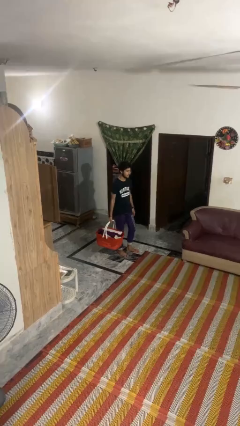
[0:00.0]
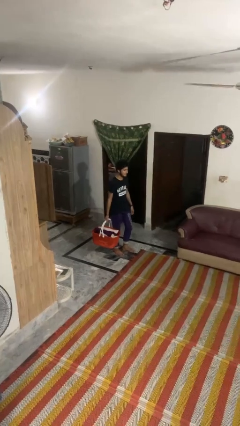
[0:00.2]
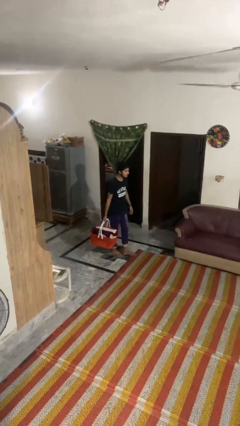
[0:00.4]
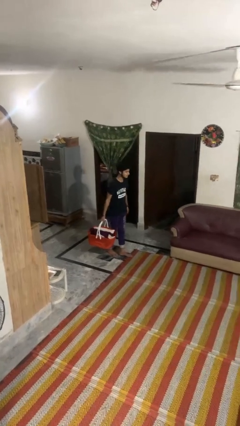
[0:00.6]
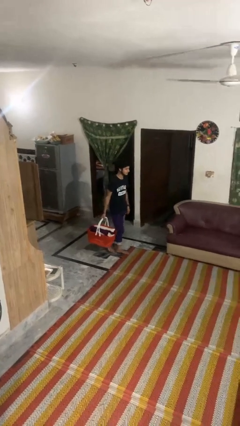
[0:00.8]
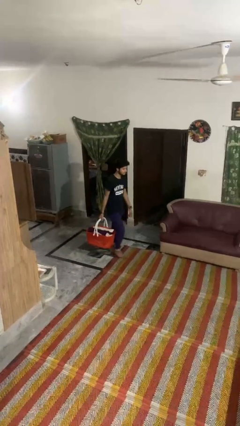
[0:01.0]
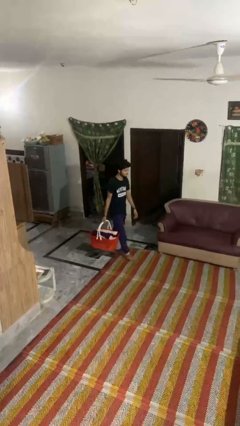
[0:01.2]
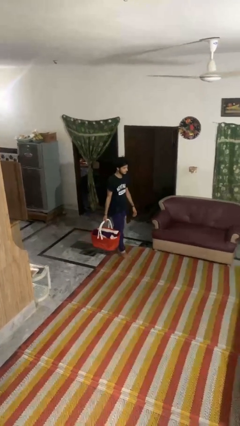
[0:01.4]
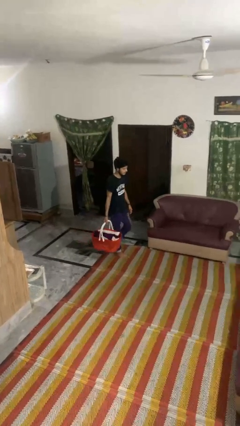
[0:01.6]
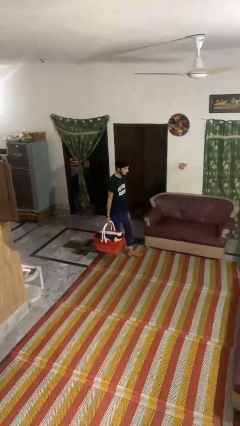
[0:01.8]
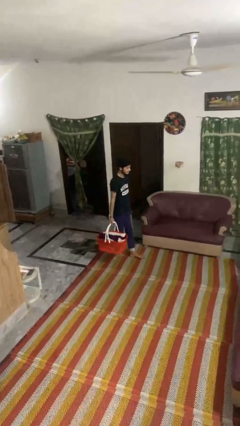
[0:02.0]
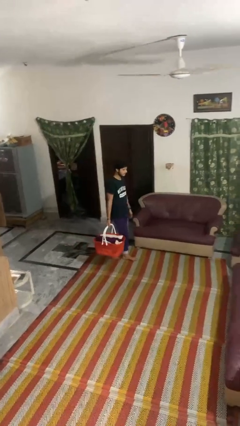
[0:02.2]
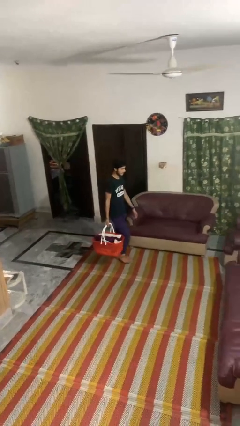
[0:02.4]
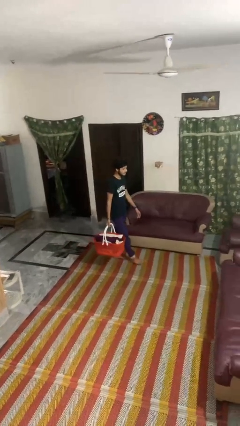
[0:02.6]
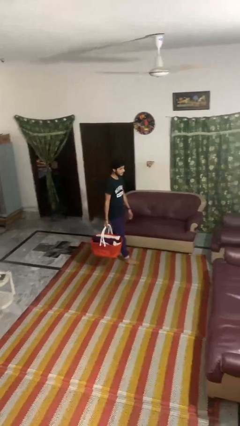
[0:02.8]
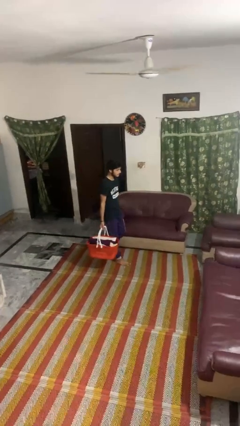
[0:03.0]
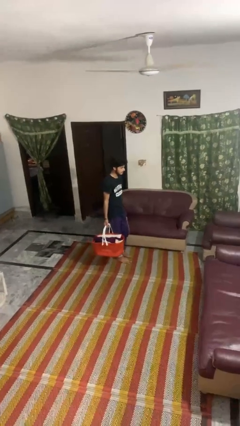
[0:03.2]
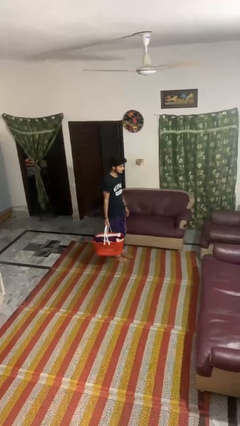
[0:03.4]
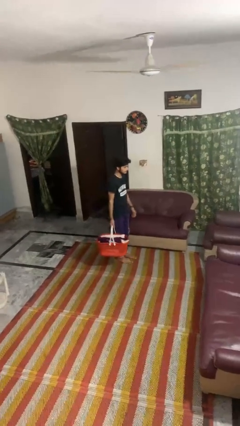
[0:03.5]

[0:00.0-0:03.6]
person carries laundry basket

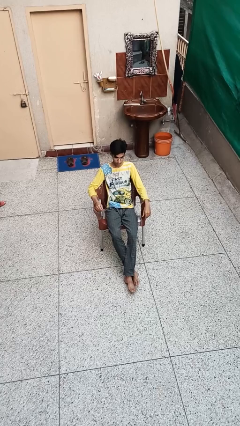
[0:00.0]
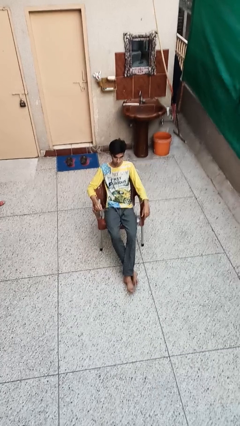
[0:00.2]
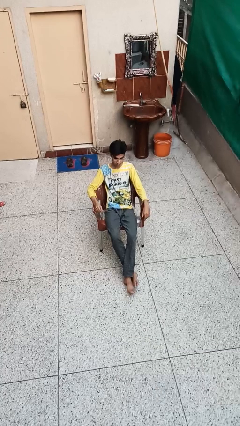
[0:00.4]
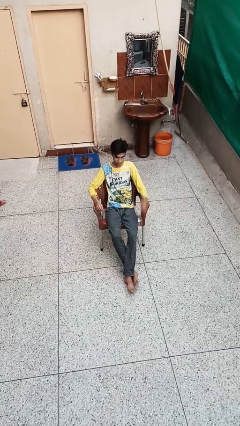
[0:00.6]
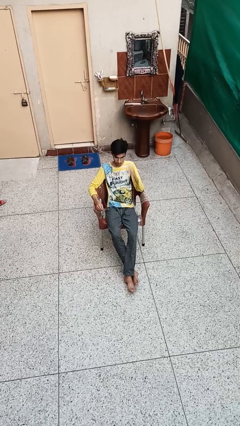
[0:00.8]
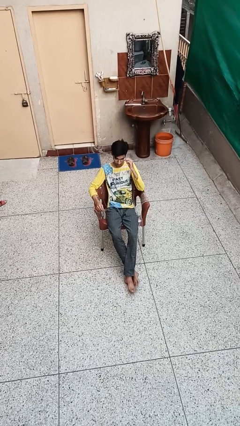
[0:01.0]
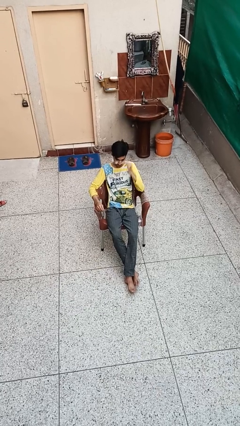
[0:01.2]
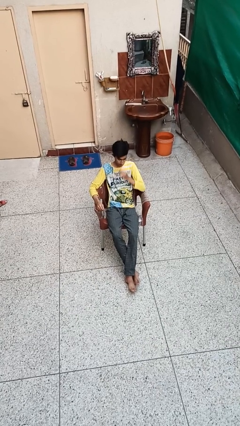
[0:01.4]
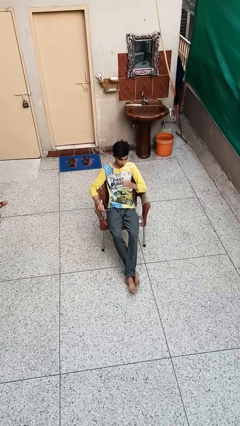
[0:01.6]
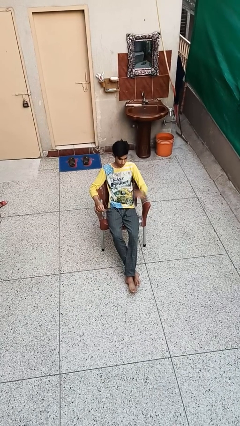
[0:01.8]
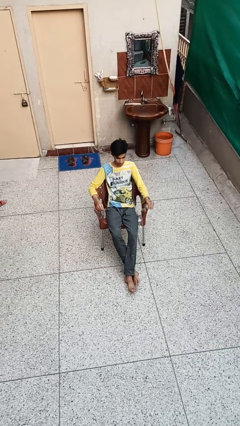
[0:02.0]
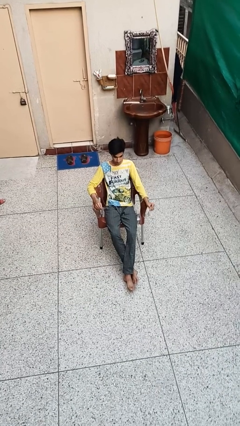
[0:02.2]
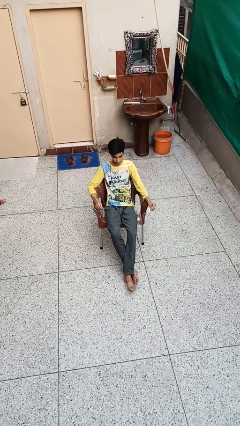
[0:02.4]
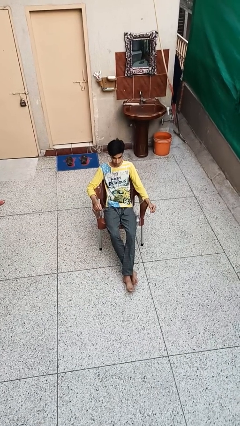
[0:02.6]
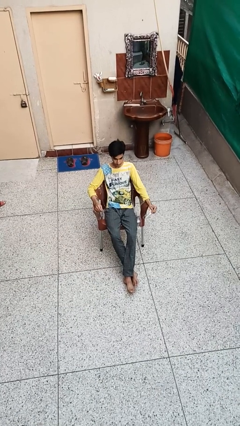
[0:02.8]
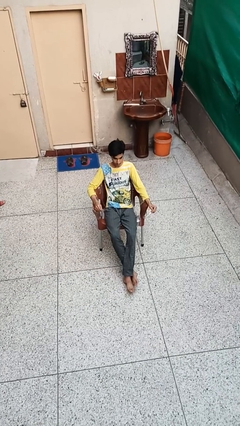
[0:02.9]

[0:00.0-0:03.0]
person takes off glasses

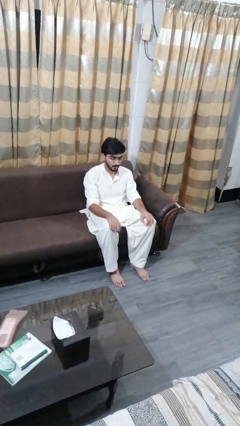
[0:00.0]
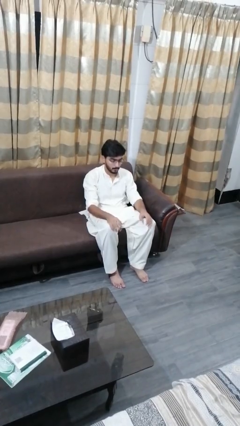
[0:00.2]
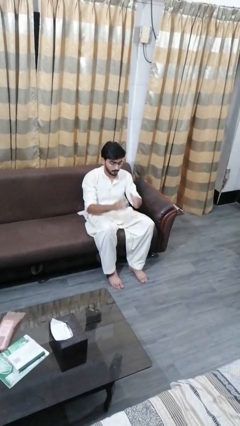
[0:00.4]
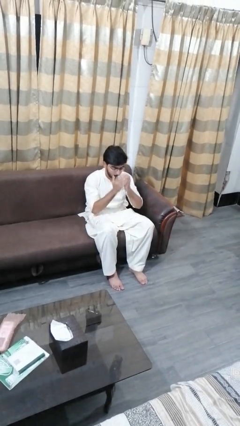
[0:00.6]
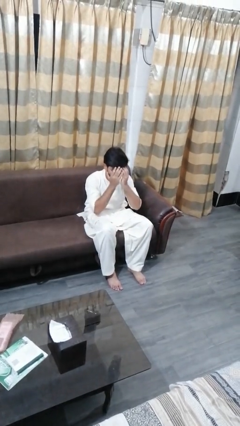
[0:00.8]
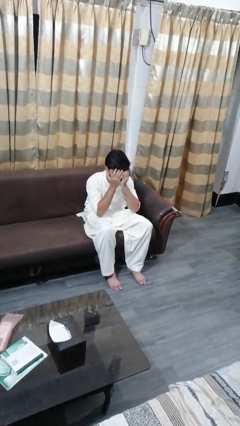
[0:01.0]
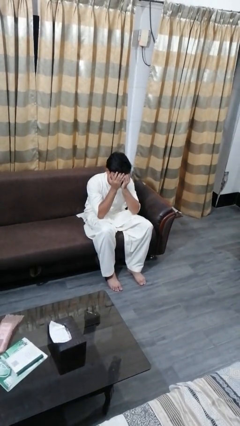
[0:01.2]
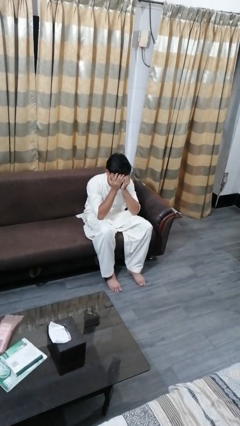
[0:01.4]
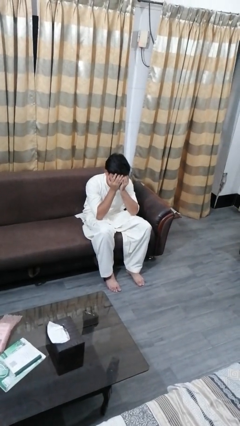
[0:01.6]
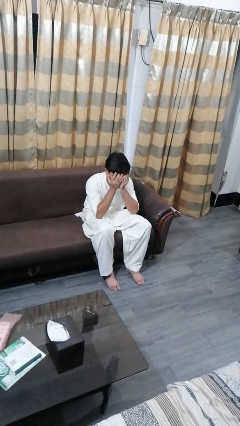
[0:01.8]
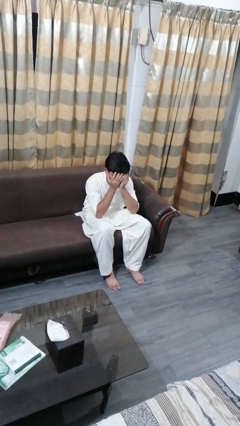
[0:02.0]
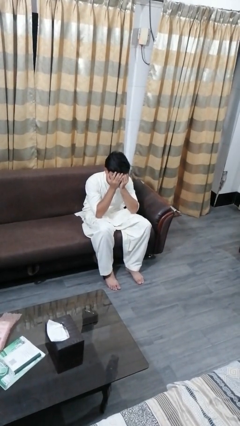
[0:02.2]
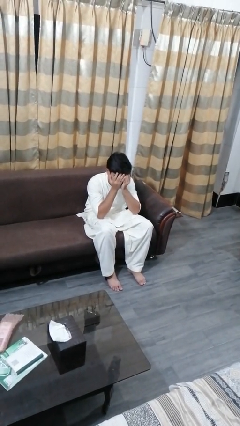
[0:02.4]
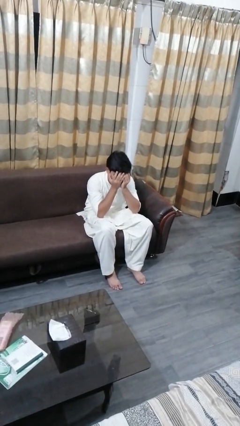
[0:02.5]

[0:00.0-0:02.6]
person covers face with hands

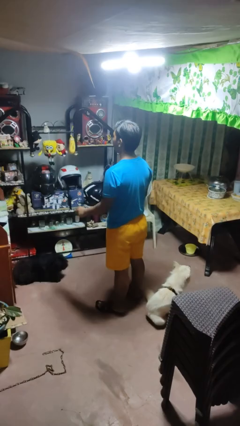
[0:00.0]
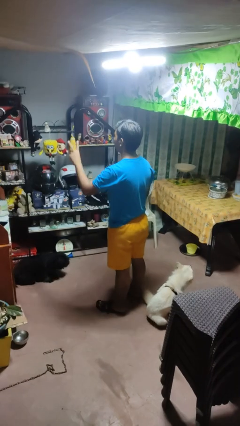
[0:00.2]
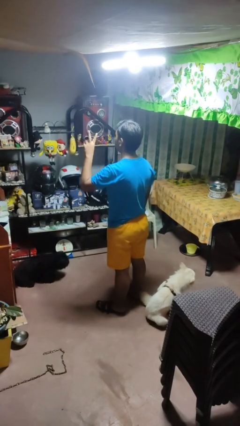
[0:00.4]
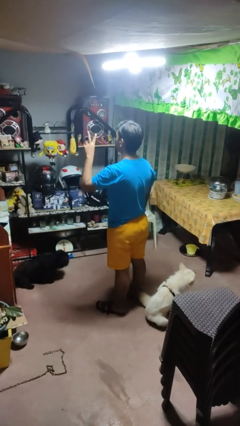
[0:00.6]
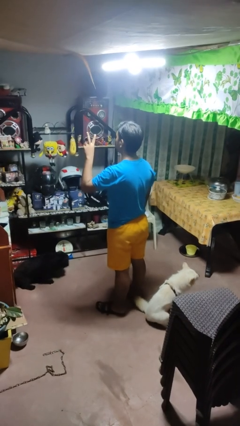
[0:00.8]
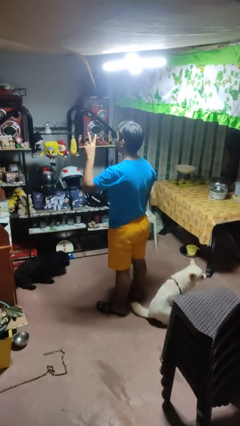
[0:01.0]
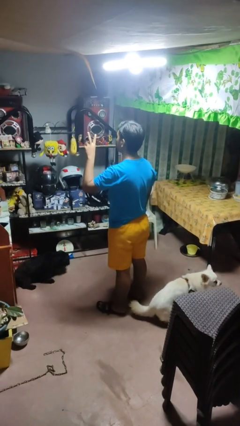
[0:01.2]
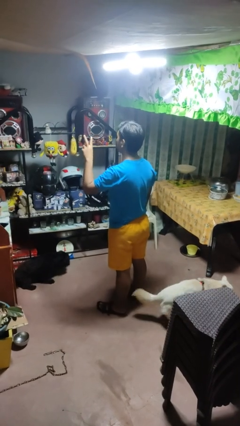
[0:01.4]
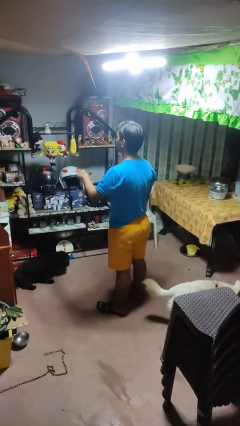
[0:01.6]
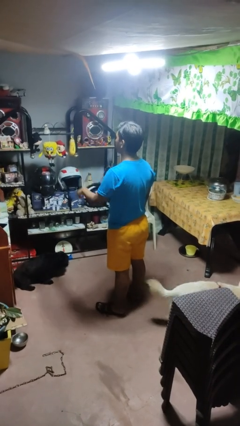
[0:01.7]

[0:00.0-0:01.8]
person gestures peace

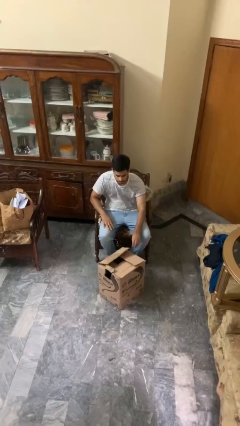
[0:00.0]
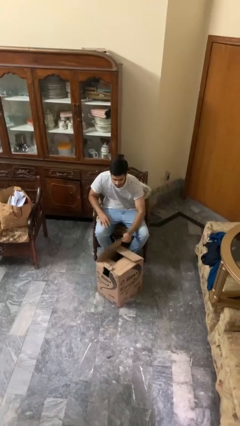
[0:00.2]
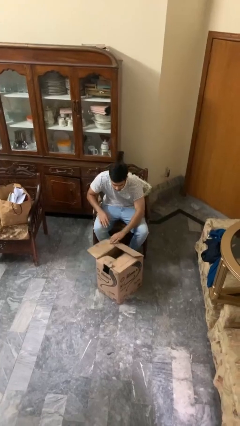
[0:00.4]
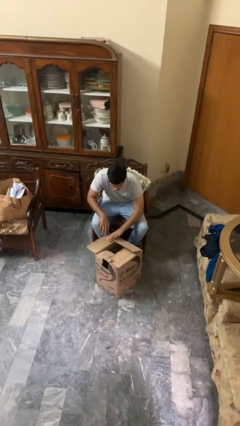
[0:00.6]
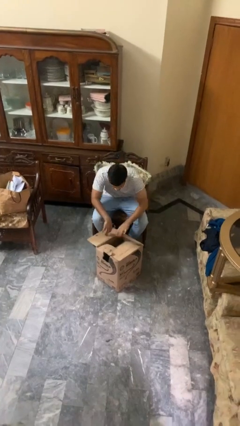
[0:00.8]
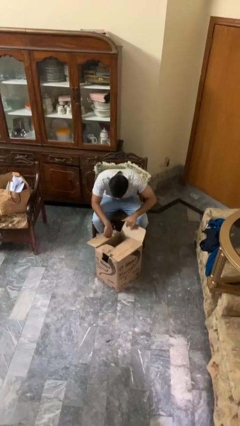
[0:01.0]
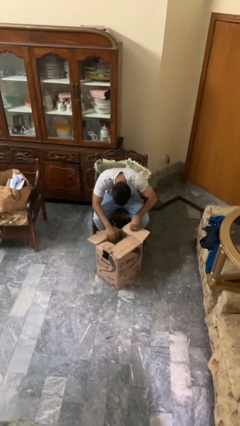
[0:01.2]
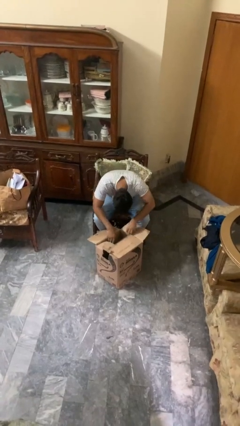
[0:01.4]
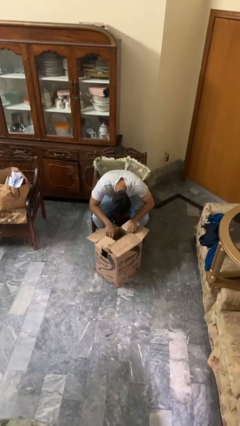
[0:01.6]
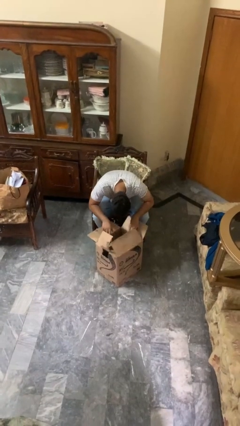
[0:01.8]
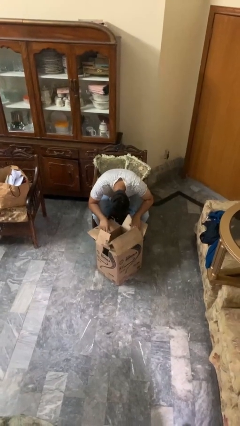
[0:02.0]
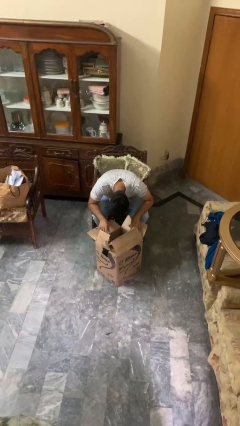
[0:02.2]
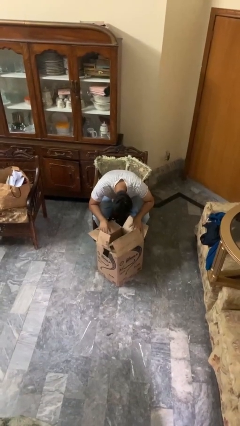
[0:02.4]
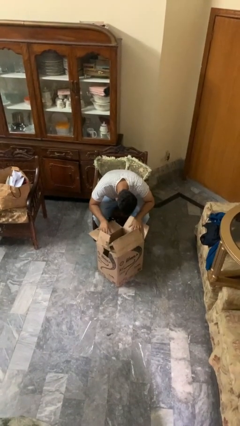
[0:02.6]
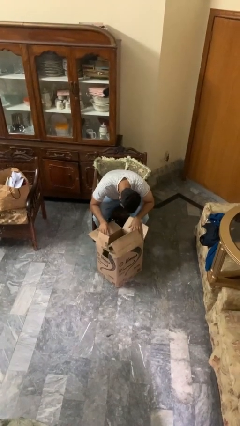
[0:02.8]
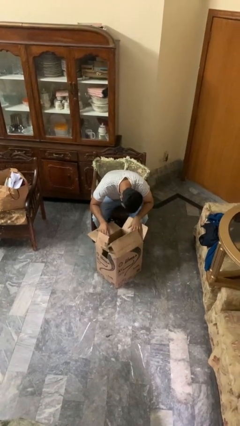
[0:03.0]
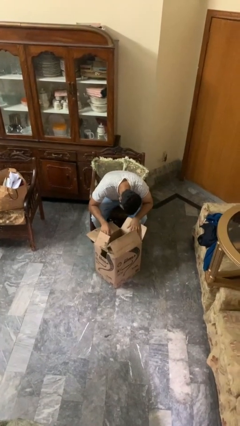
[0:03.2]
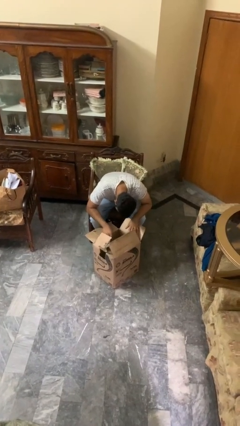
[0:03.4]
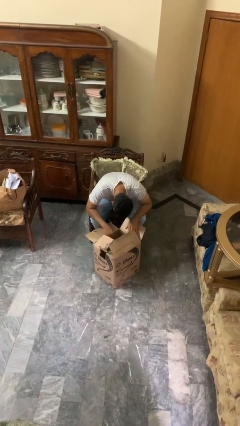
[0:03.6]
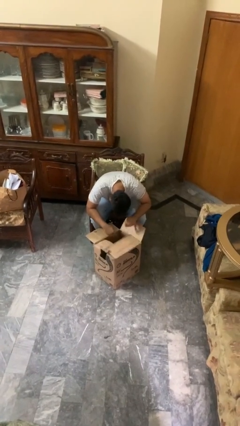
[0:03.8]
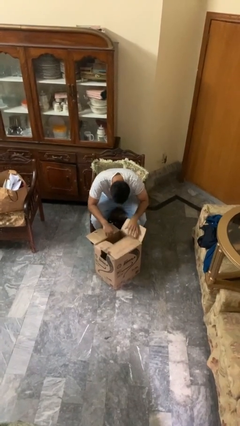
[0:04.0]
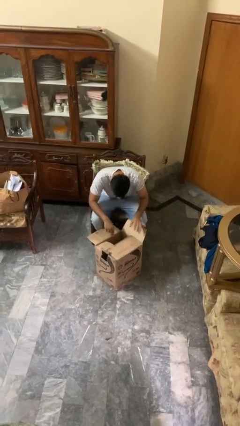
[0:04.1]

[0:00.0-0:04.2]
person searches in box

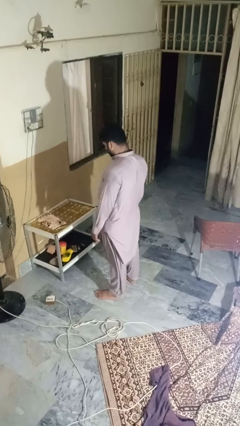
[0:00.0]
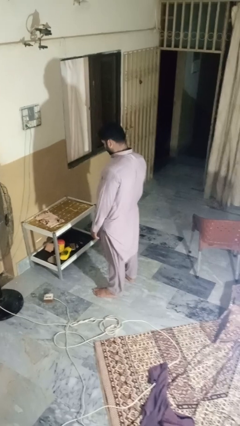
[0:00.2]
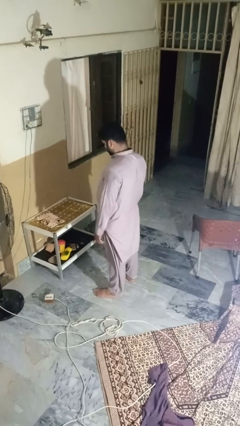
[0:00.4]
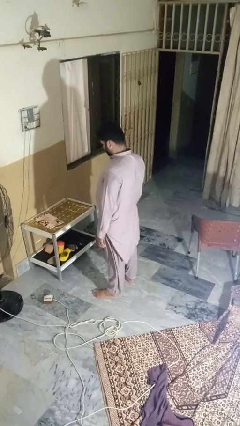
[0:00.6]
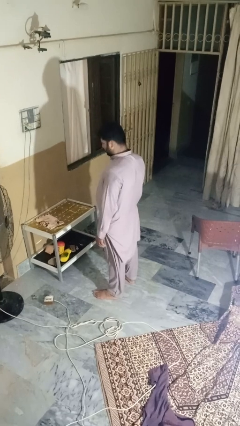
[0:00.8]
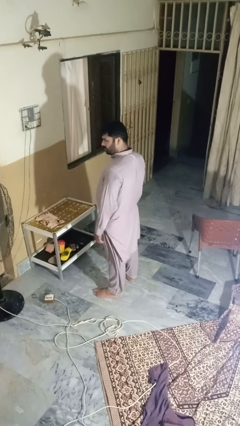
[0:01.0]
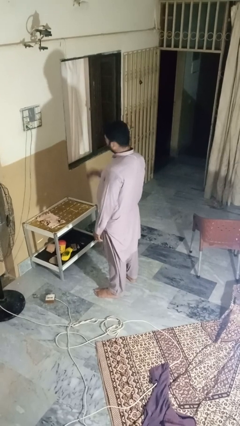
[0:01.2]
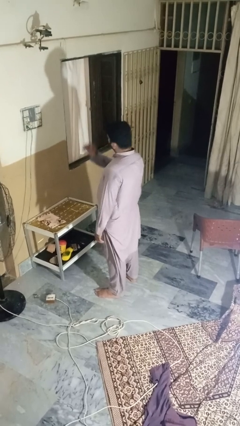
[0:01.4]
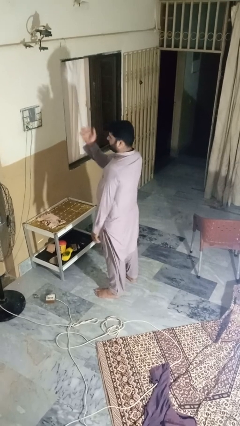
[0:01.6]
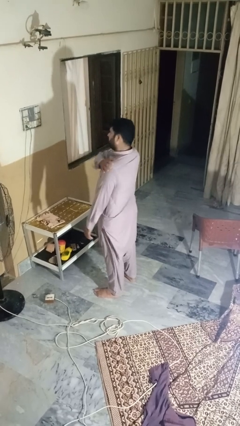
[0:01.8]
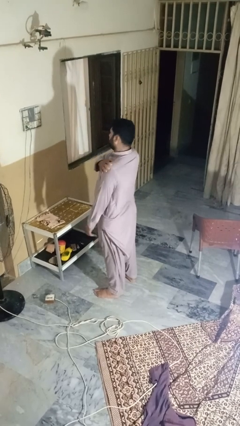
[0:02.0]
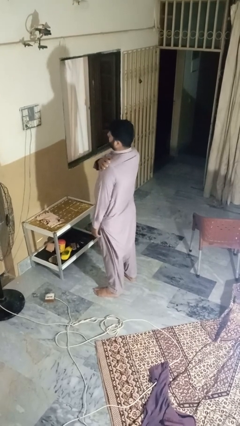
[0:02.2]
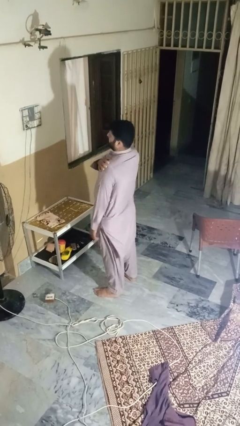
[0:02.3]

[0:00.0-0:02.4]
person shrugs
